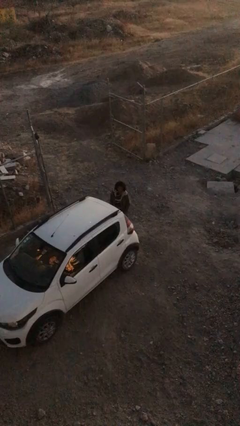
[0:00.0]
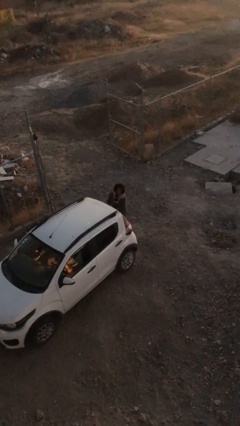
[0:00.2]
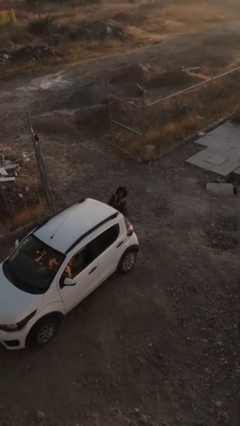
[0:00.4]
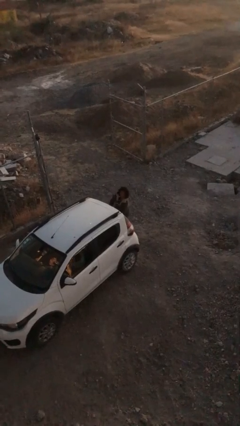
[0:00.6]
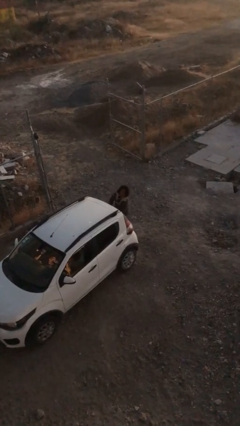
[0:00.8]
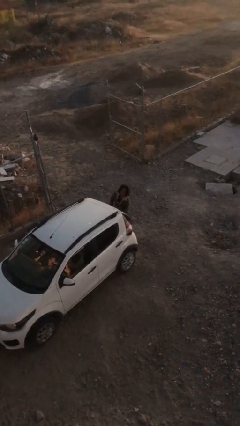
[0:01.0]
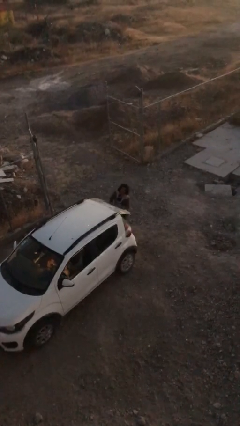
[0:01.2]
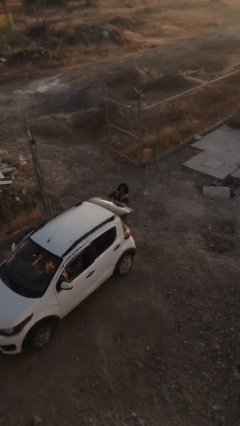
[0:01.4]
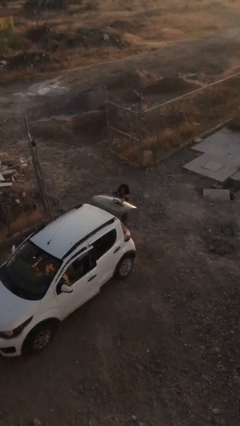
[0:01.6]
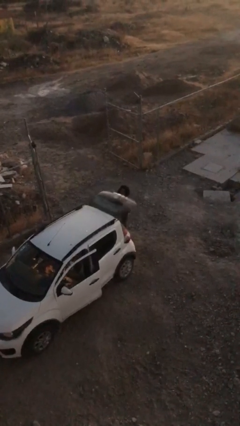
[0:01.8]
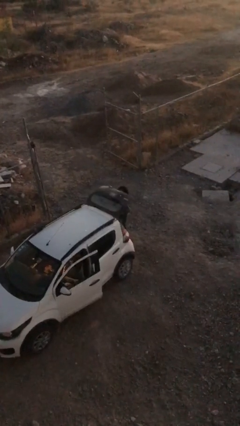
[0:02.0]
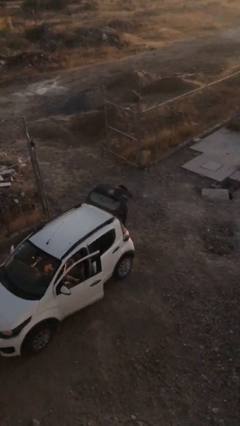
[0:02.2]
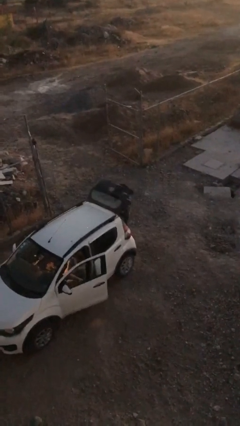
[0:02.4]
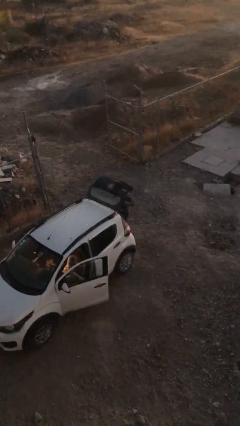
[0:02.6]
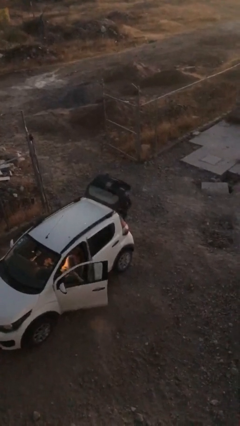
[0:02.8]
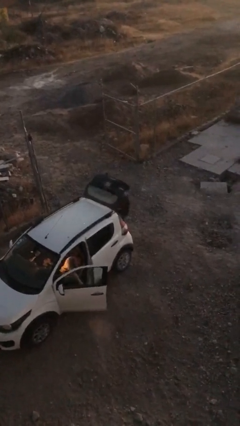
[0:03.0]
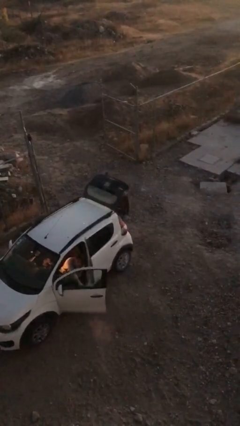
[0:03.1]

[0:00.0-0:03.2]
person opens car trunk

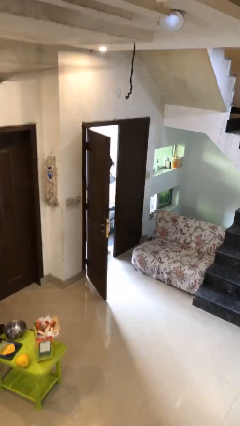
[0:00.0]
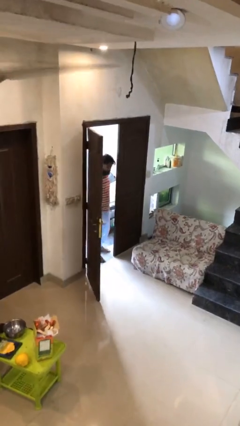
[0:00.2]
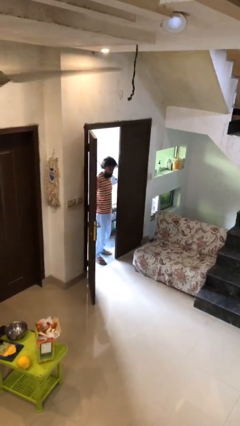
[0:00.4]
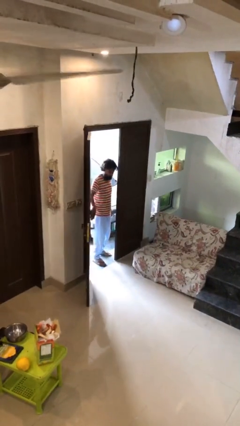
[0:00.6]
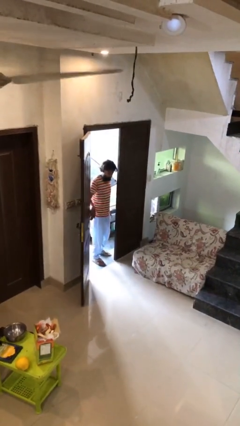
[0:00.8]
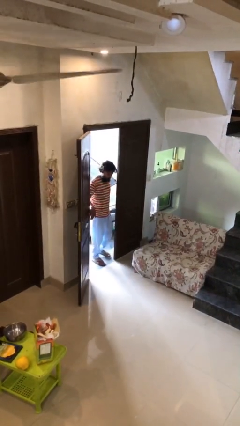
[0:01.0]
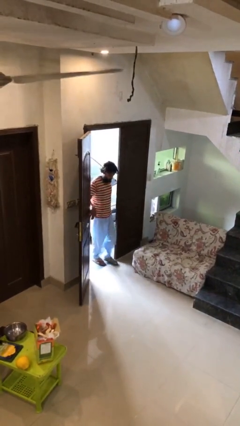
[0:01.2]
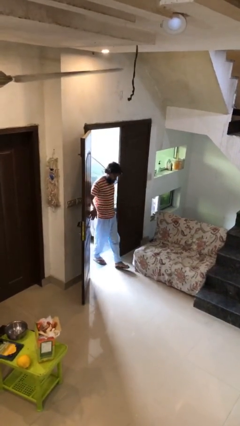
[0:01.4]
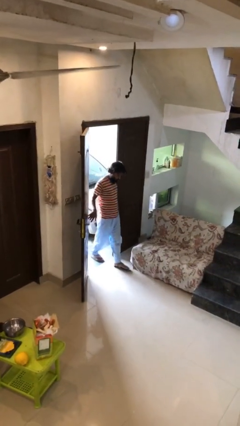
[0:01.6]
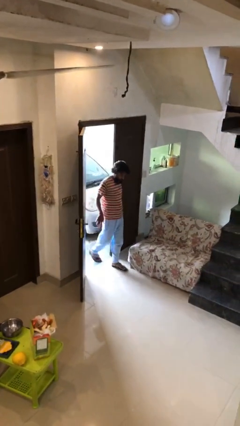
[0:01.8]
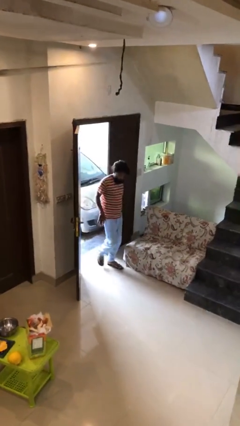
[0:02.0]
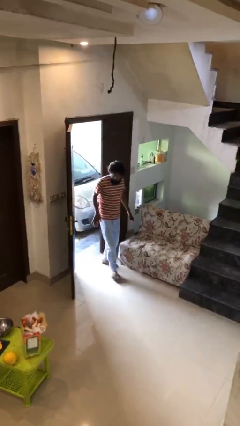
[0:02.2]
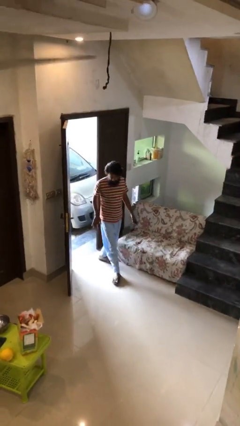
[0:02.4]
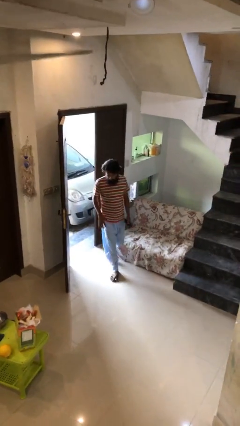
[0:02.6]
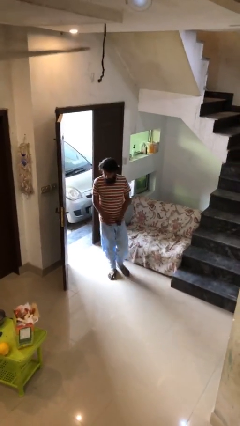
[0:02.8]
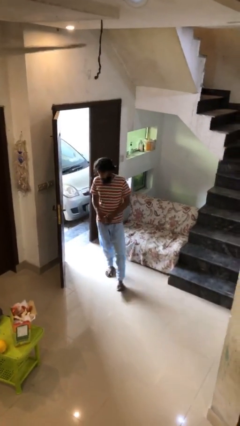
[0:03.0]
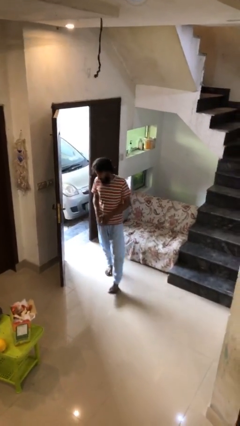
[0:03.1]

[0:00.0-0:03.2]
person enters scene through structure

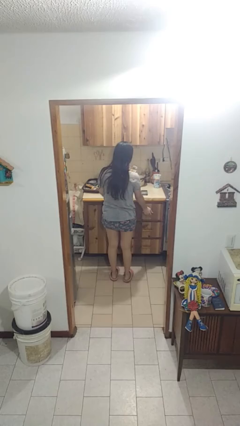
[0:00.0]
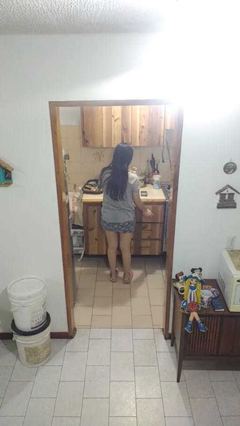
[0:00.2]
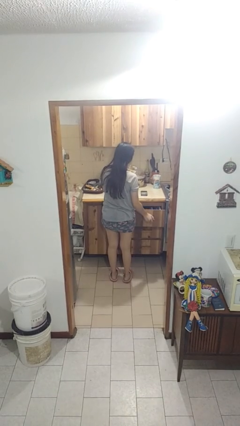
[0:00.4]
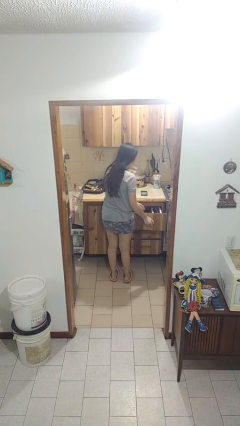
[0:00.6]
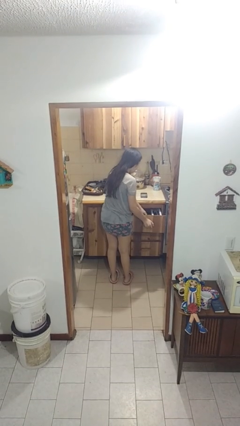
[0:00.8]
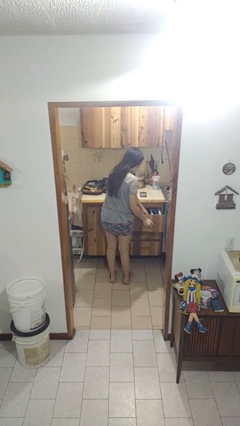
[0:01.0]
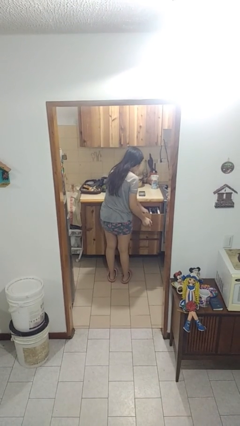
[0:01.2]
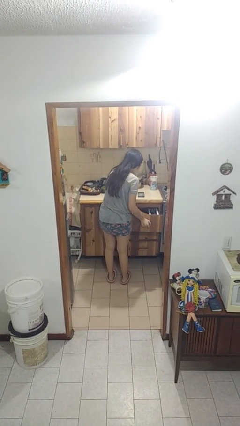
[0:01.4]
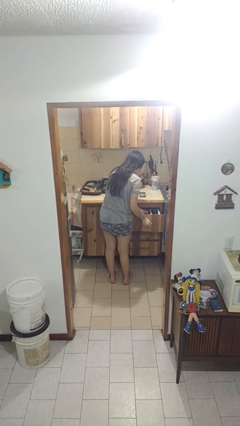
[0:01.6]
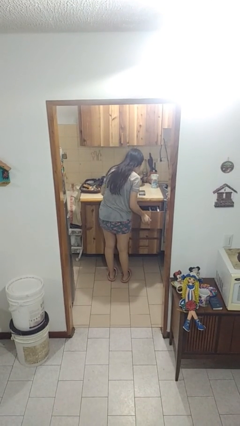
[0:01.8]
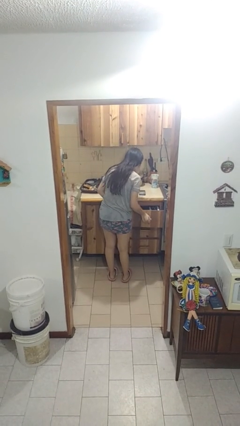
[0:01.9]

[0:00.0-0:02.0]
person searches in kitchen drawer

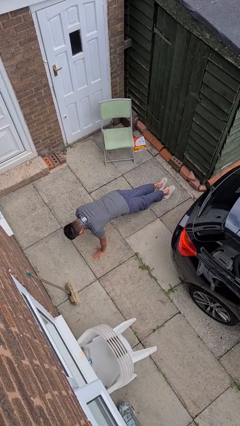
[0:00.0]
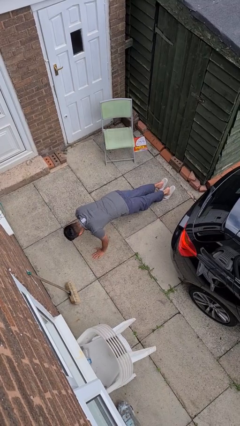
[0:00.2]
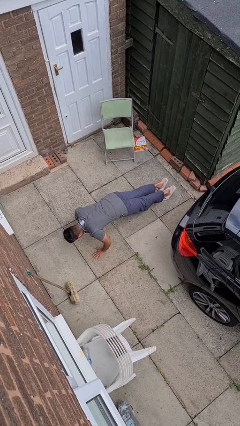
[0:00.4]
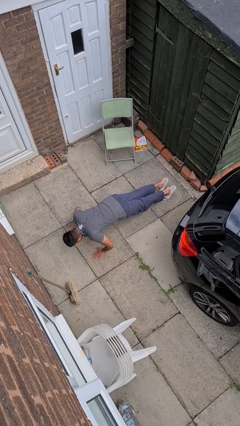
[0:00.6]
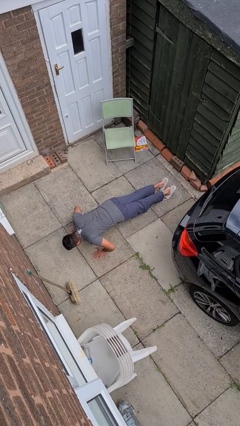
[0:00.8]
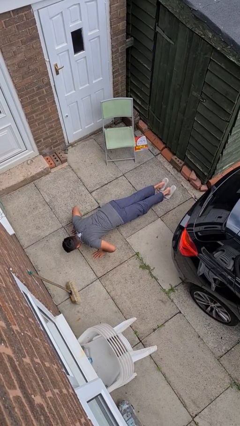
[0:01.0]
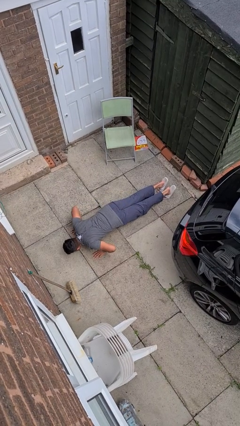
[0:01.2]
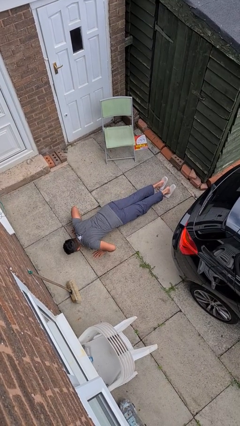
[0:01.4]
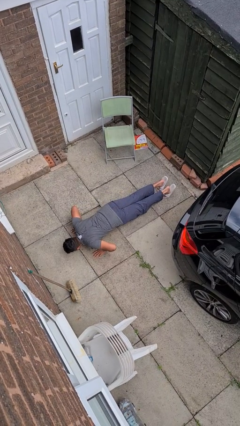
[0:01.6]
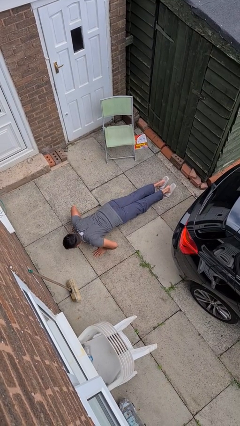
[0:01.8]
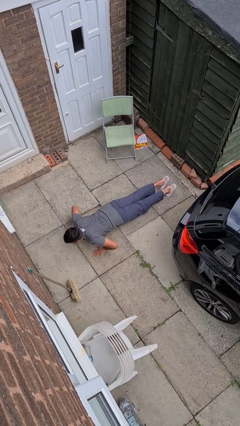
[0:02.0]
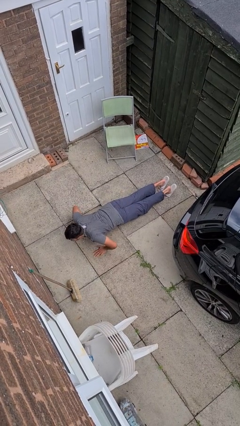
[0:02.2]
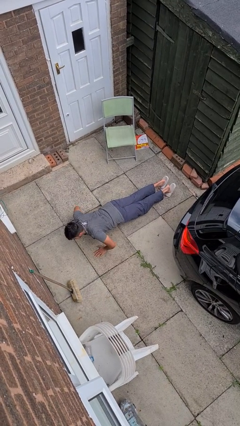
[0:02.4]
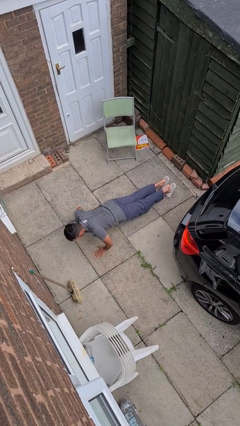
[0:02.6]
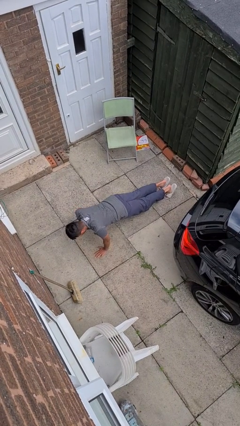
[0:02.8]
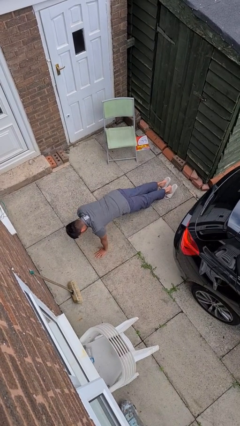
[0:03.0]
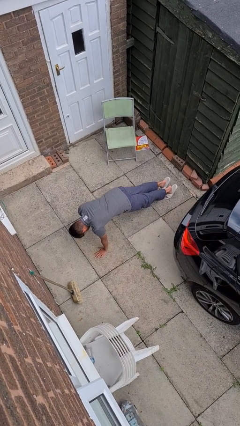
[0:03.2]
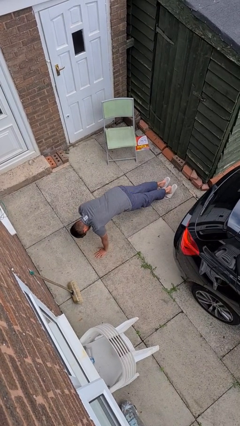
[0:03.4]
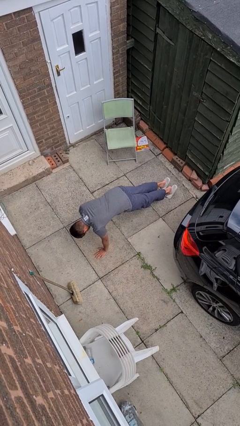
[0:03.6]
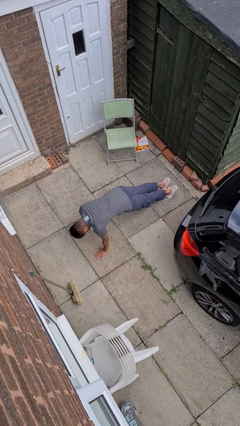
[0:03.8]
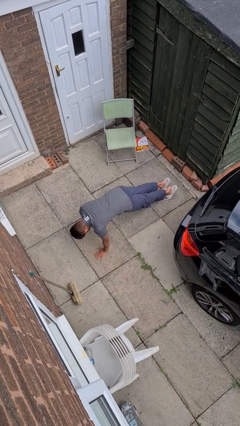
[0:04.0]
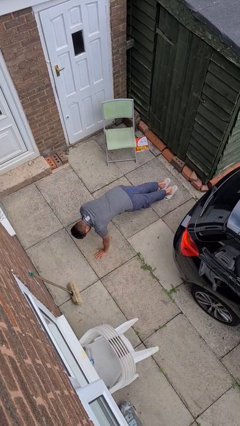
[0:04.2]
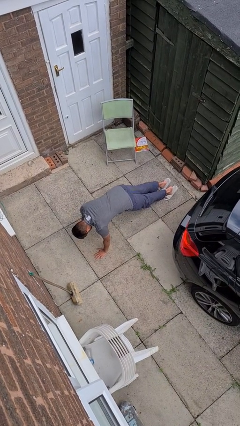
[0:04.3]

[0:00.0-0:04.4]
person exercises with pushup

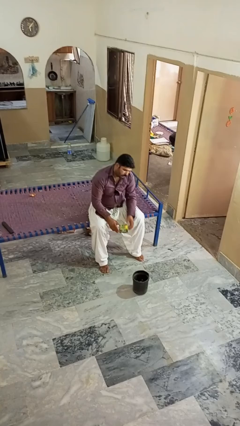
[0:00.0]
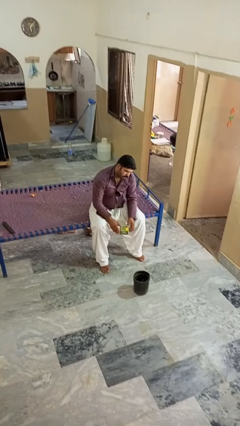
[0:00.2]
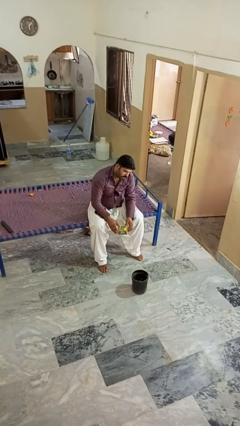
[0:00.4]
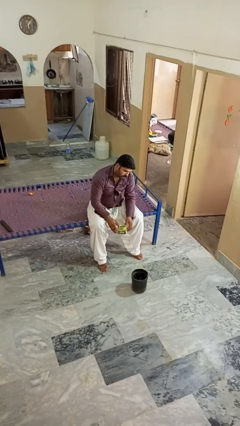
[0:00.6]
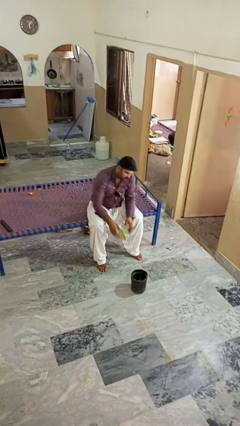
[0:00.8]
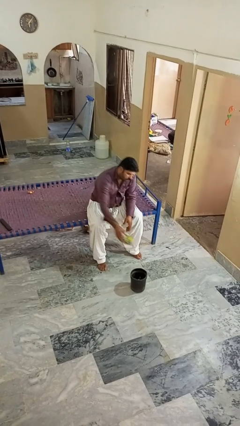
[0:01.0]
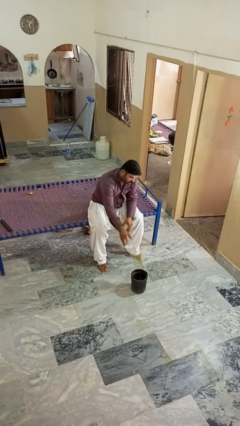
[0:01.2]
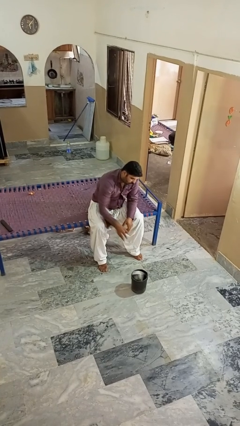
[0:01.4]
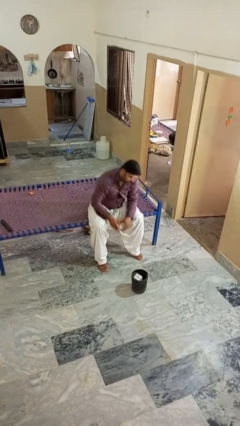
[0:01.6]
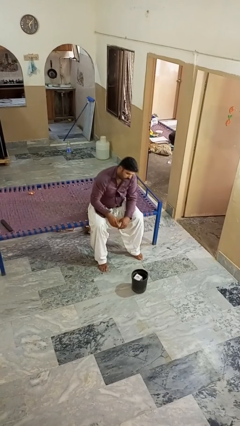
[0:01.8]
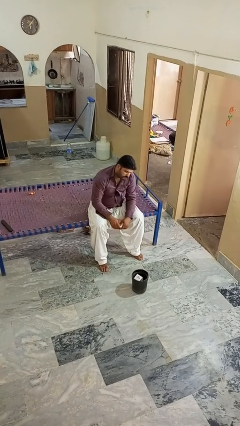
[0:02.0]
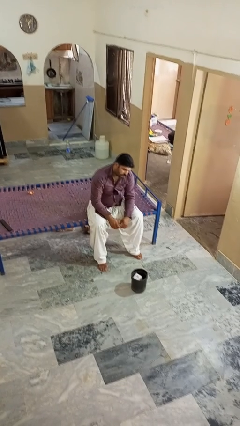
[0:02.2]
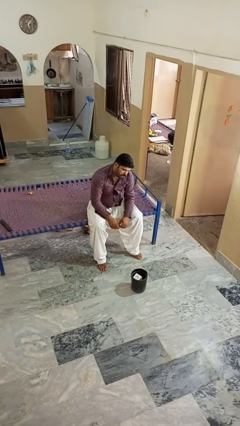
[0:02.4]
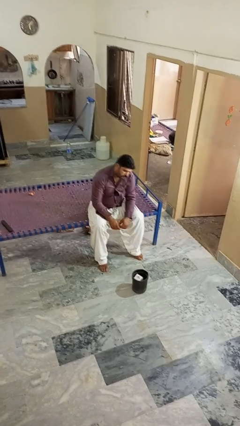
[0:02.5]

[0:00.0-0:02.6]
person puts object into basket

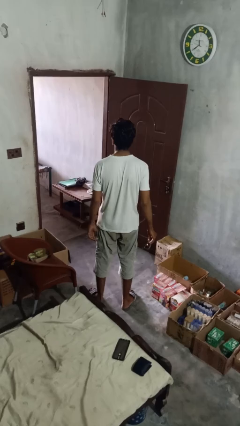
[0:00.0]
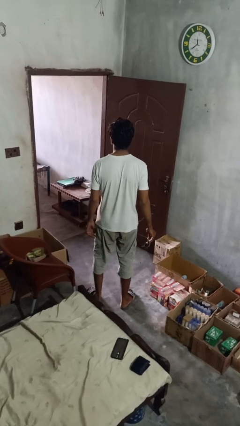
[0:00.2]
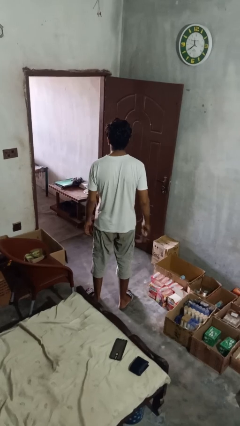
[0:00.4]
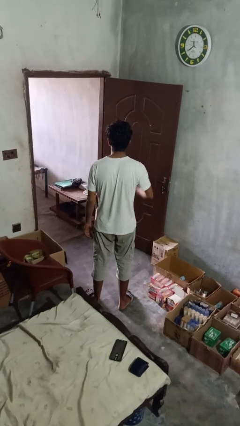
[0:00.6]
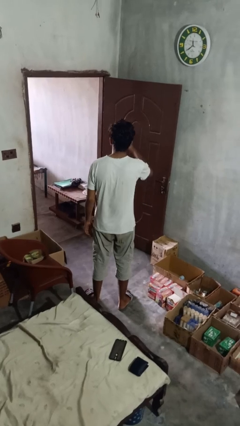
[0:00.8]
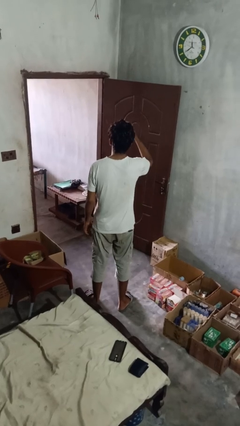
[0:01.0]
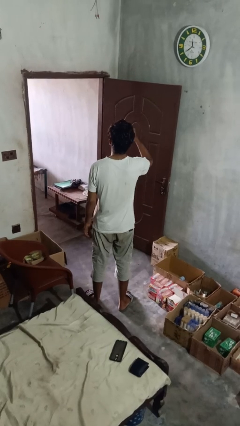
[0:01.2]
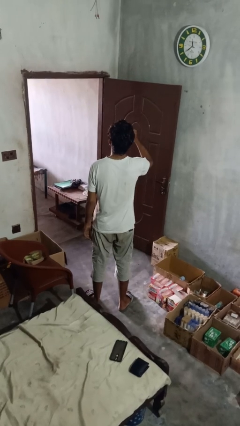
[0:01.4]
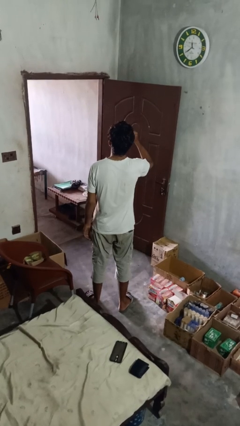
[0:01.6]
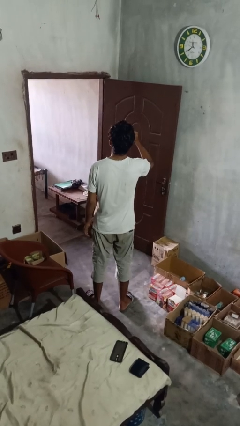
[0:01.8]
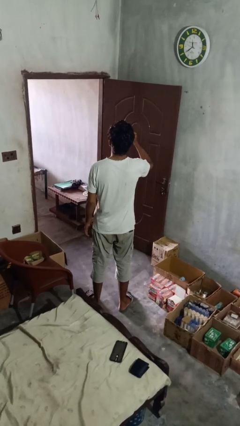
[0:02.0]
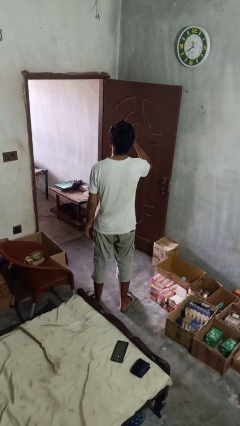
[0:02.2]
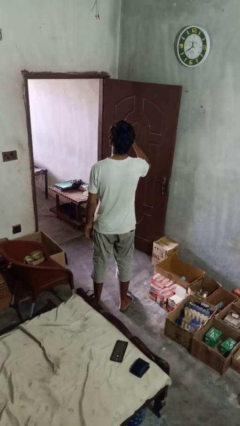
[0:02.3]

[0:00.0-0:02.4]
person puts on glasses
